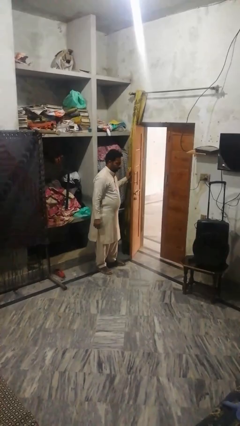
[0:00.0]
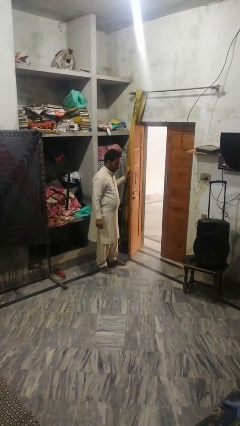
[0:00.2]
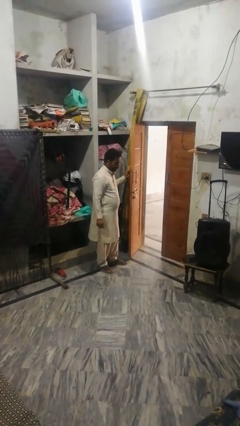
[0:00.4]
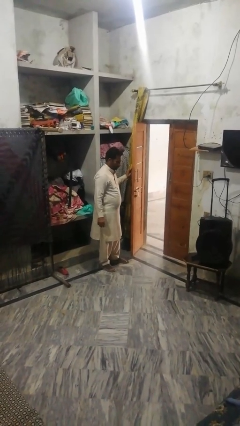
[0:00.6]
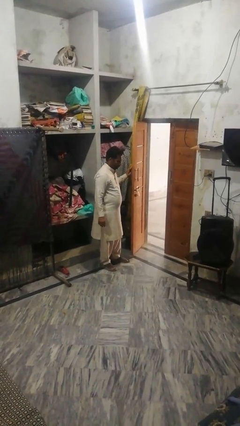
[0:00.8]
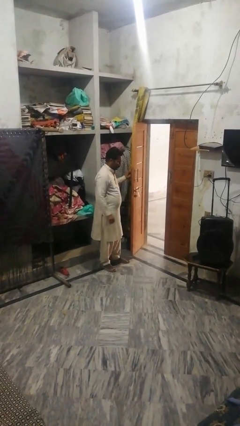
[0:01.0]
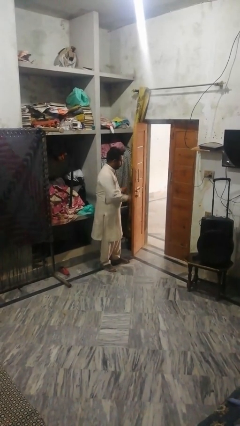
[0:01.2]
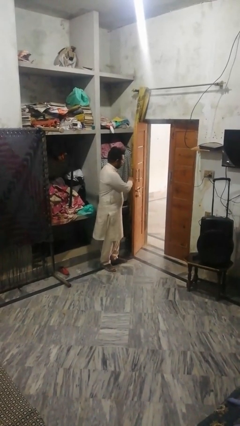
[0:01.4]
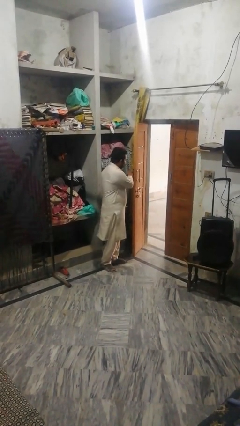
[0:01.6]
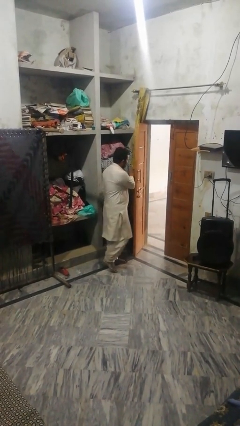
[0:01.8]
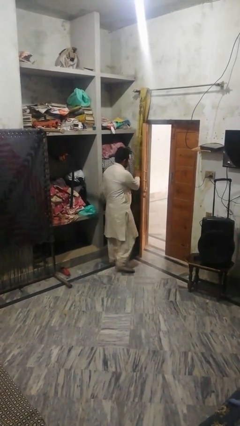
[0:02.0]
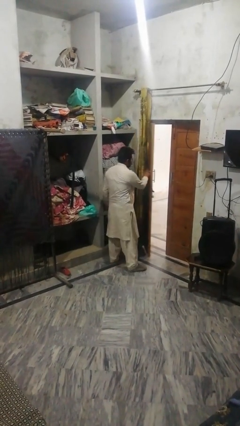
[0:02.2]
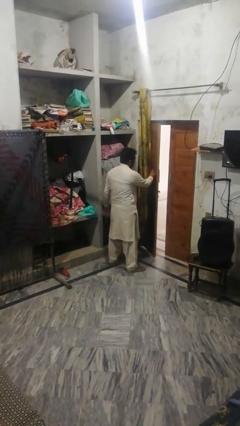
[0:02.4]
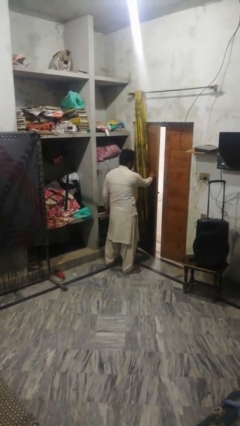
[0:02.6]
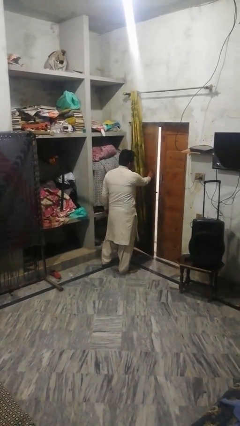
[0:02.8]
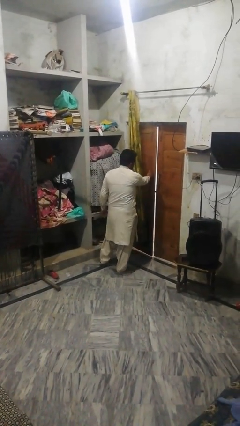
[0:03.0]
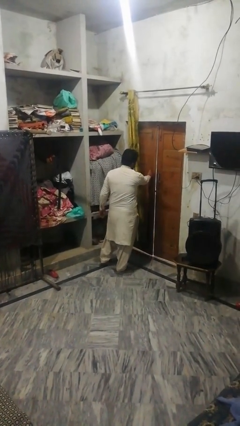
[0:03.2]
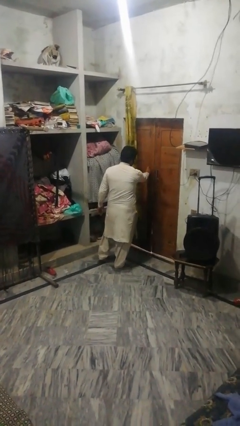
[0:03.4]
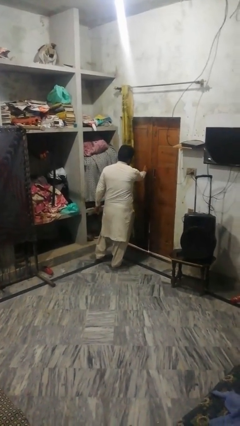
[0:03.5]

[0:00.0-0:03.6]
person closes facility door

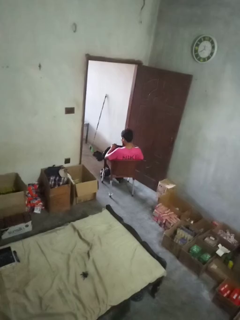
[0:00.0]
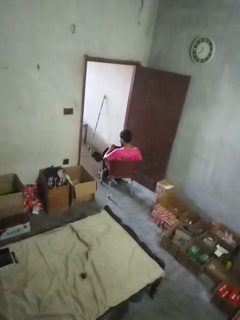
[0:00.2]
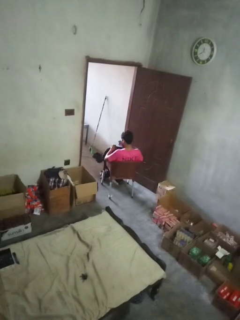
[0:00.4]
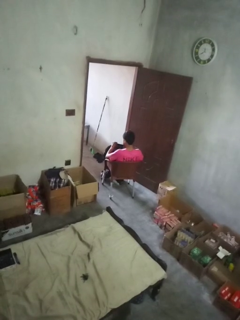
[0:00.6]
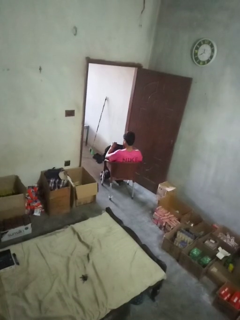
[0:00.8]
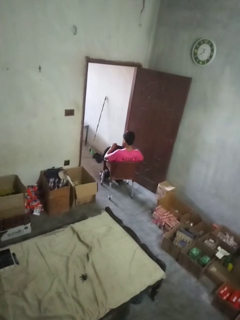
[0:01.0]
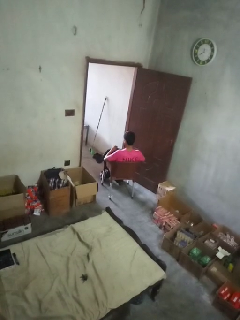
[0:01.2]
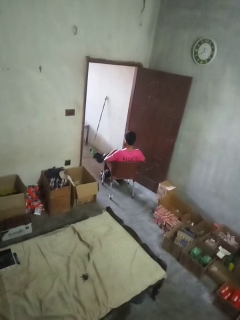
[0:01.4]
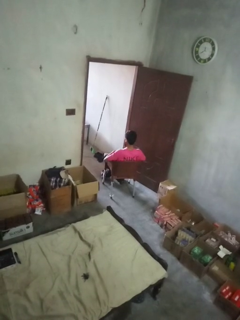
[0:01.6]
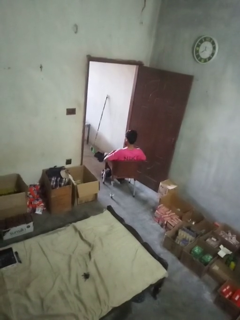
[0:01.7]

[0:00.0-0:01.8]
person puts object into backpack

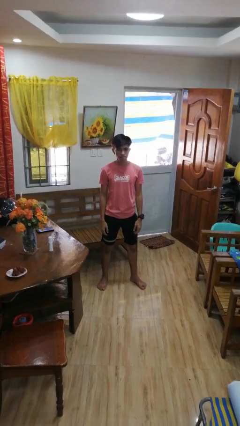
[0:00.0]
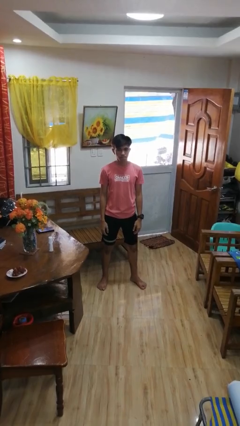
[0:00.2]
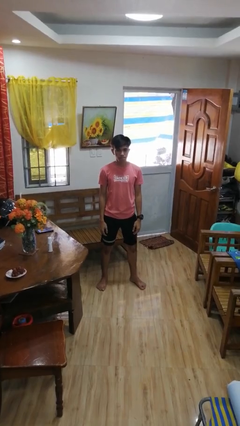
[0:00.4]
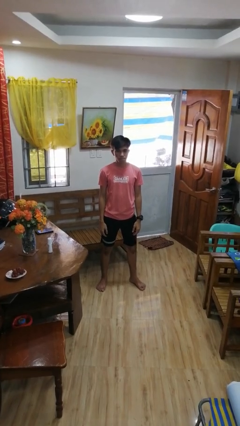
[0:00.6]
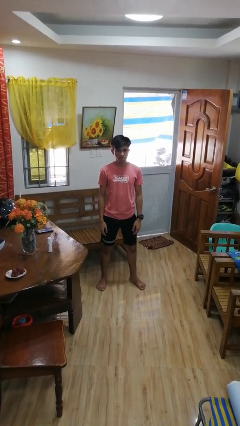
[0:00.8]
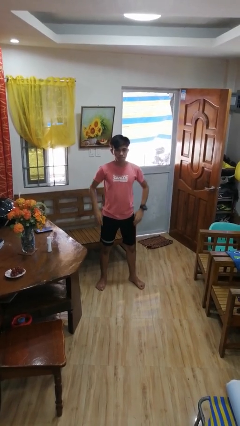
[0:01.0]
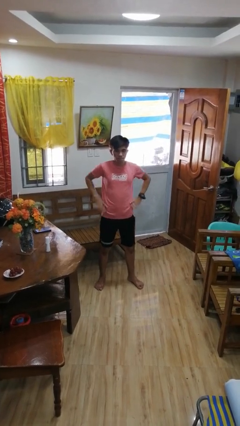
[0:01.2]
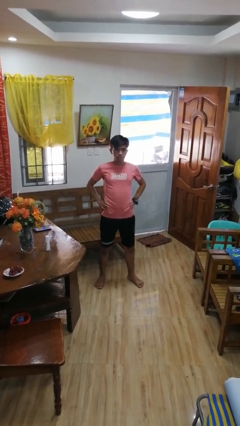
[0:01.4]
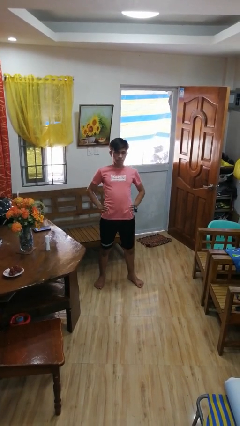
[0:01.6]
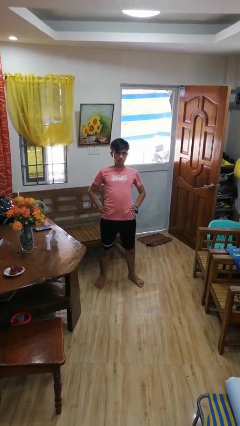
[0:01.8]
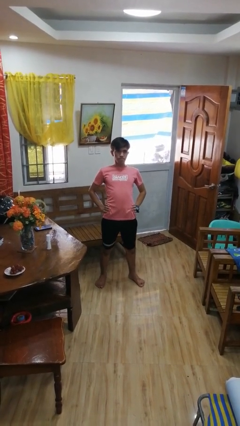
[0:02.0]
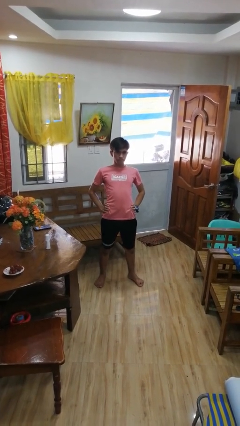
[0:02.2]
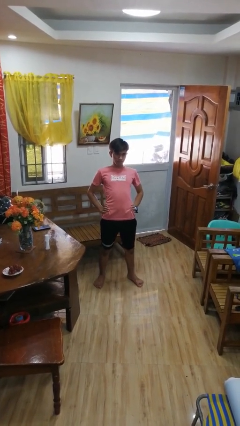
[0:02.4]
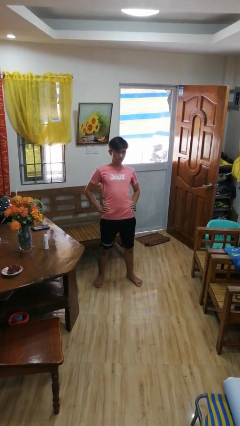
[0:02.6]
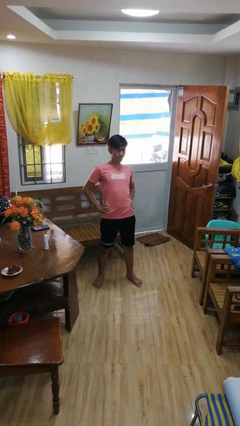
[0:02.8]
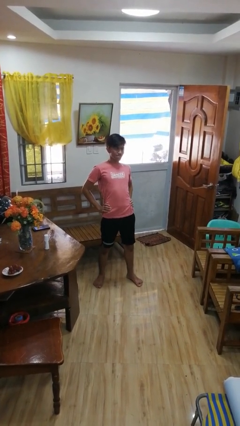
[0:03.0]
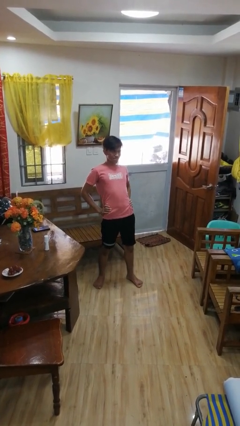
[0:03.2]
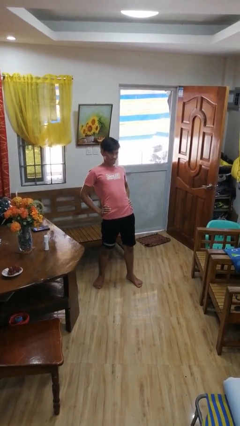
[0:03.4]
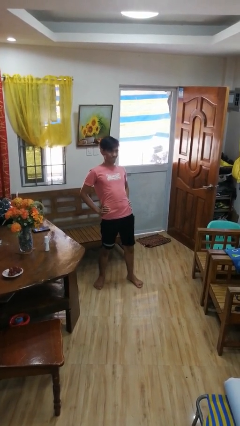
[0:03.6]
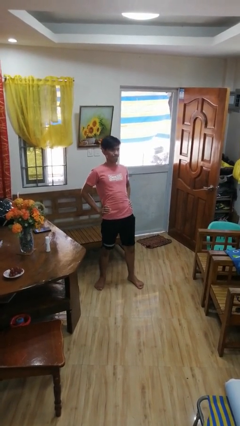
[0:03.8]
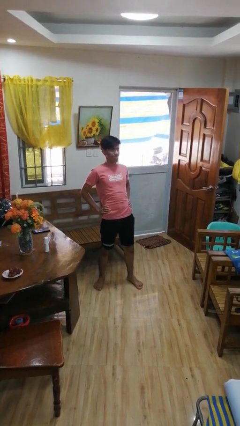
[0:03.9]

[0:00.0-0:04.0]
person stretches back

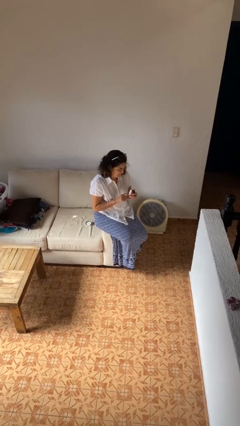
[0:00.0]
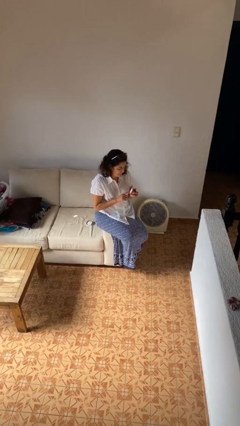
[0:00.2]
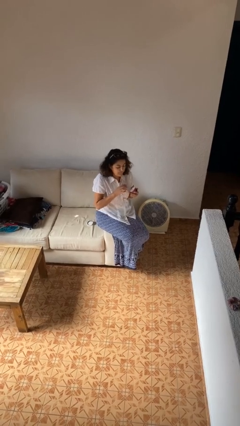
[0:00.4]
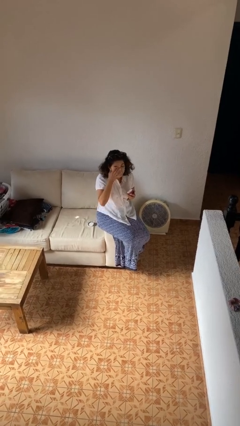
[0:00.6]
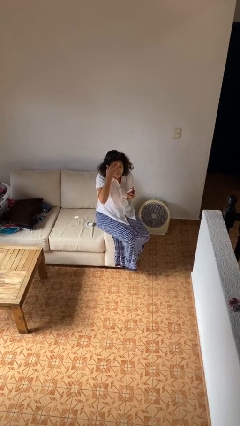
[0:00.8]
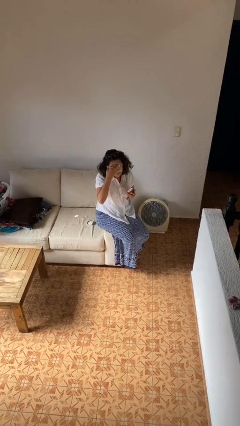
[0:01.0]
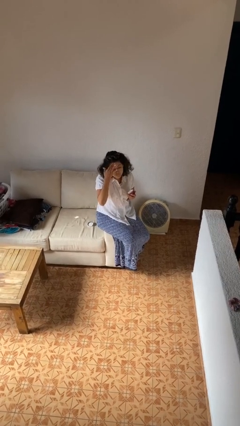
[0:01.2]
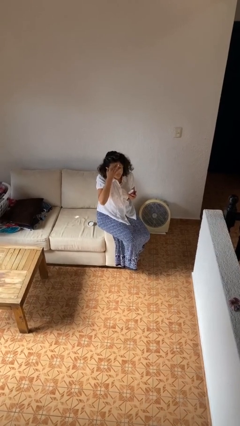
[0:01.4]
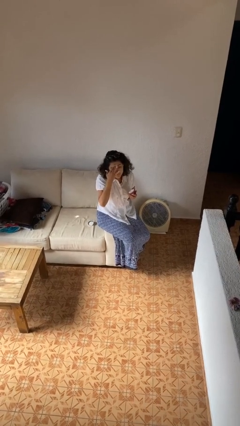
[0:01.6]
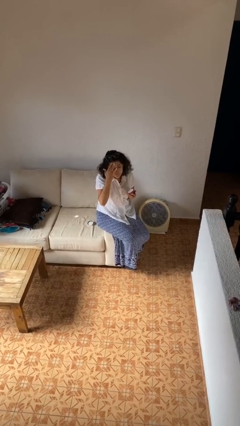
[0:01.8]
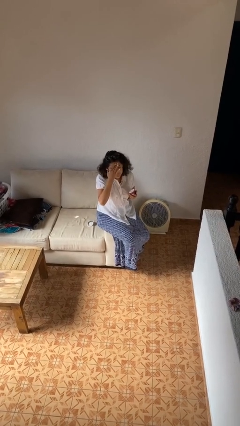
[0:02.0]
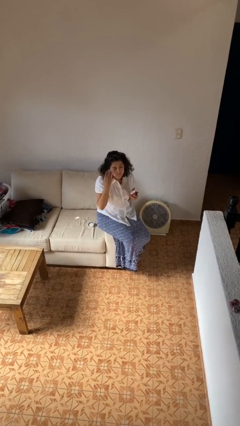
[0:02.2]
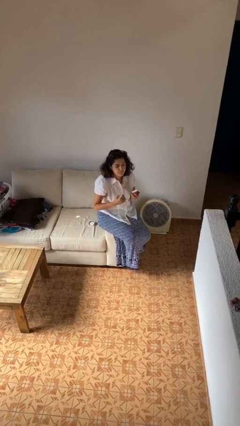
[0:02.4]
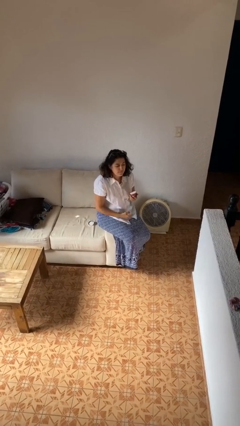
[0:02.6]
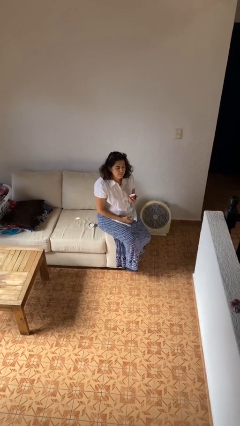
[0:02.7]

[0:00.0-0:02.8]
person applies facial moisturizer

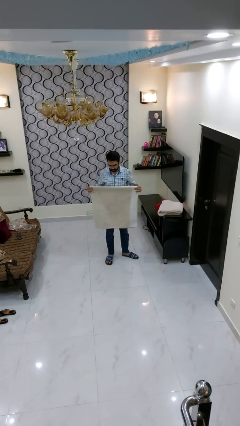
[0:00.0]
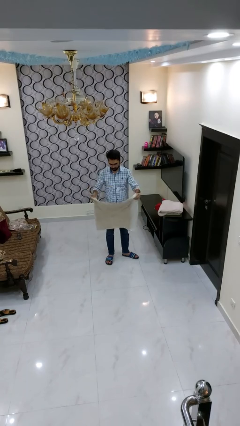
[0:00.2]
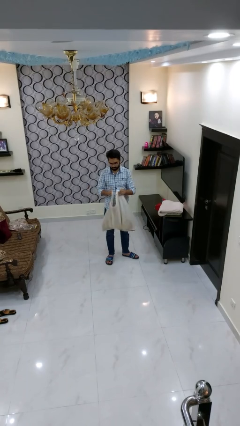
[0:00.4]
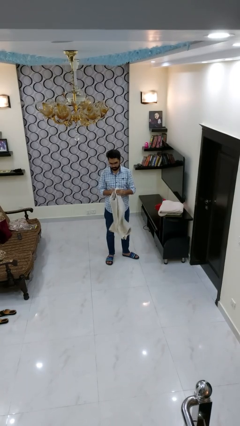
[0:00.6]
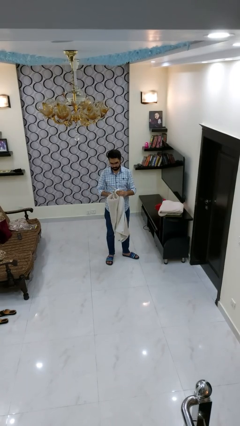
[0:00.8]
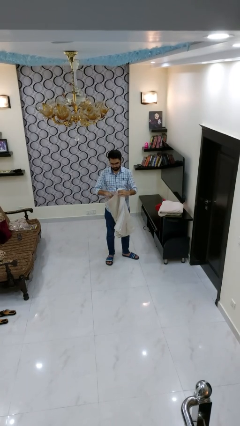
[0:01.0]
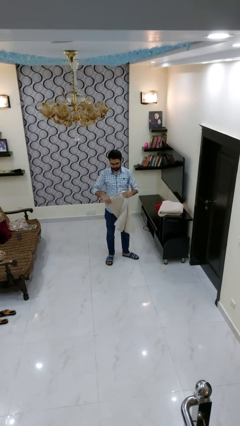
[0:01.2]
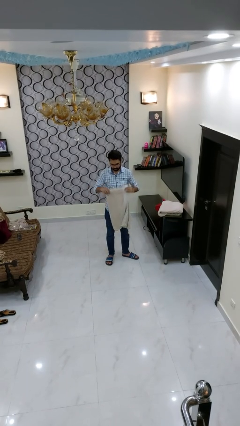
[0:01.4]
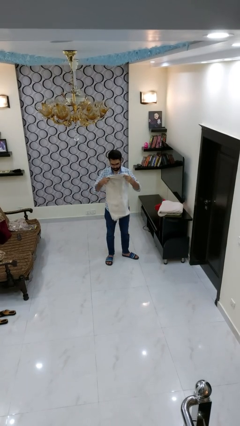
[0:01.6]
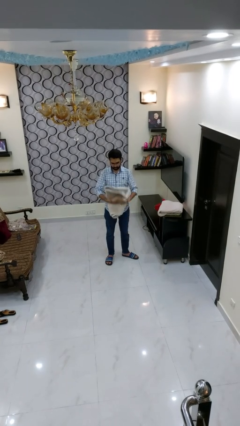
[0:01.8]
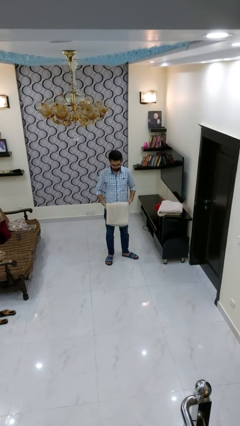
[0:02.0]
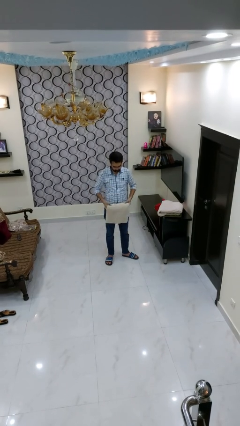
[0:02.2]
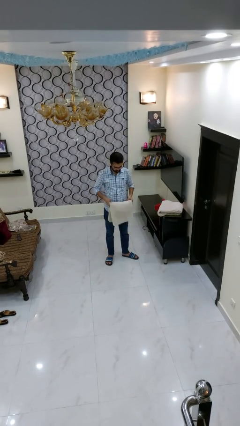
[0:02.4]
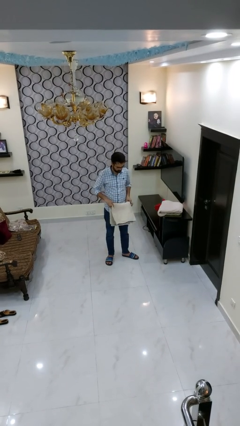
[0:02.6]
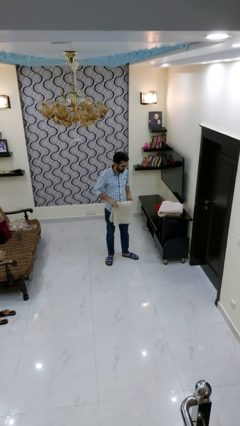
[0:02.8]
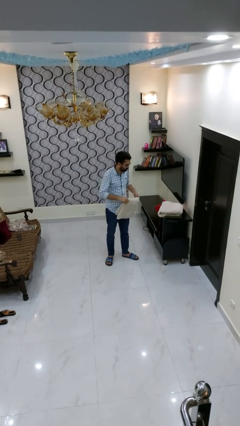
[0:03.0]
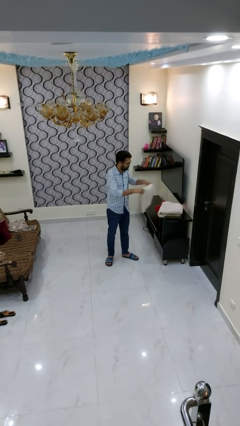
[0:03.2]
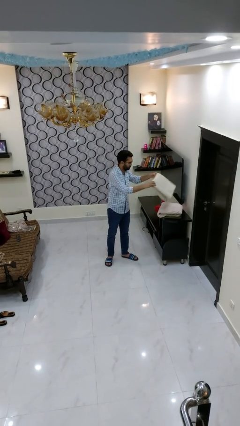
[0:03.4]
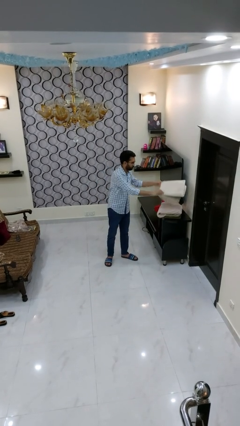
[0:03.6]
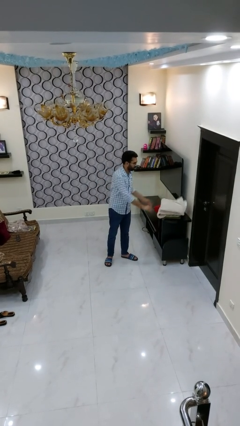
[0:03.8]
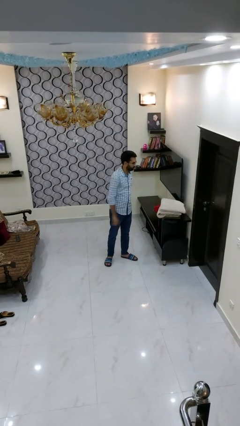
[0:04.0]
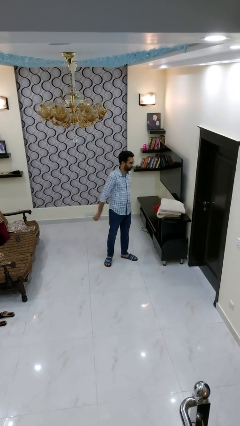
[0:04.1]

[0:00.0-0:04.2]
person folds towel

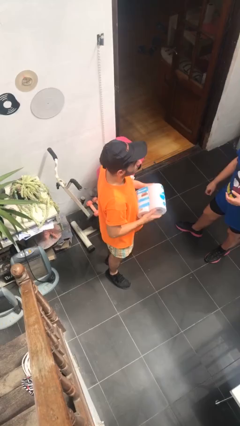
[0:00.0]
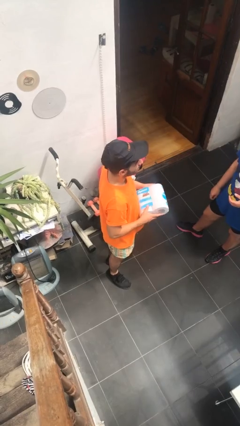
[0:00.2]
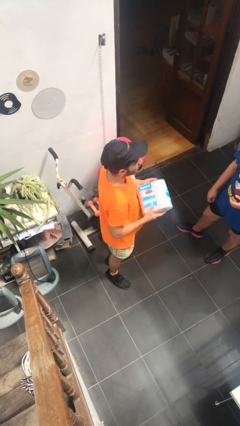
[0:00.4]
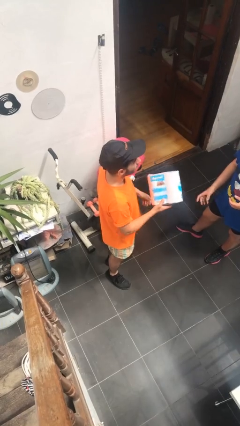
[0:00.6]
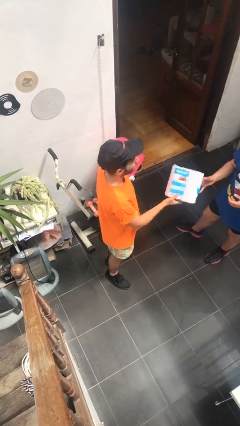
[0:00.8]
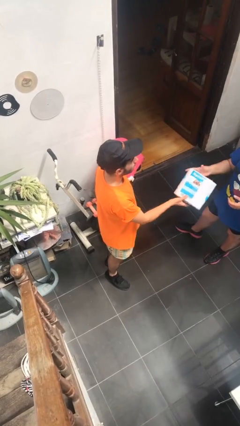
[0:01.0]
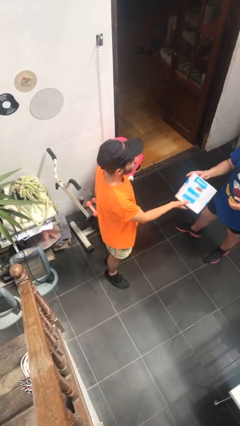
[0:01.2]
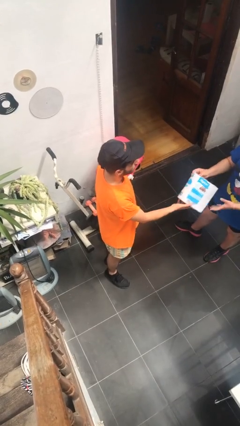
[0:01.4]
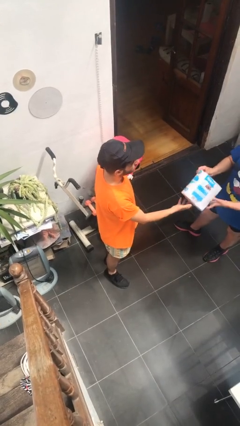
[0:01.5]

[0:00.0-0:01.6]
person transfers object to person
